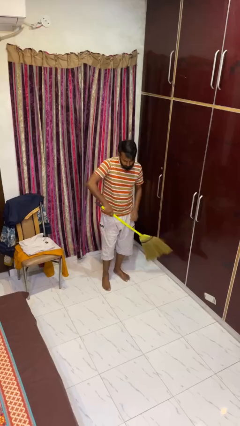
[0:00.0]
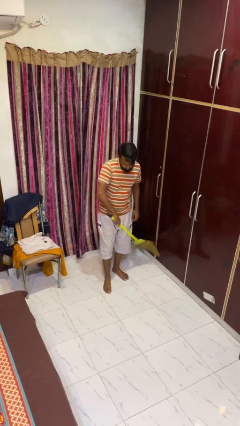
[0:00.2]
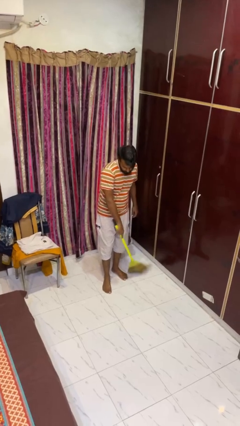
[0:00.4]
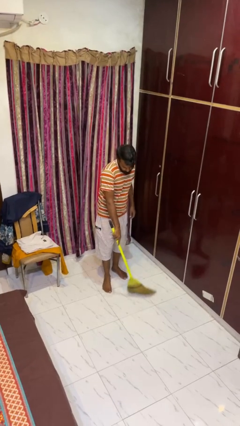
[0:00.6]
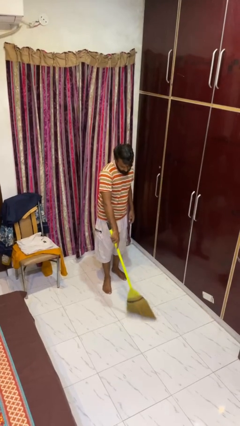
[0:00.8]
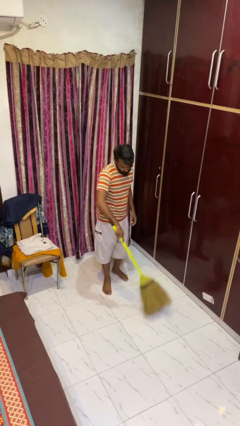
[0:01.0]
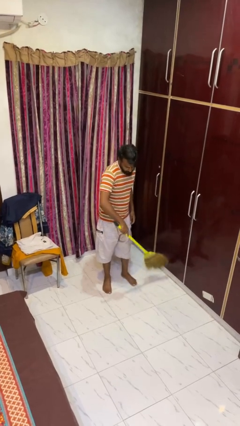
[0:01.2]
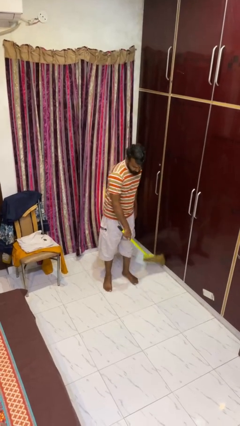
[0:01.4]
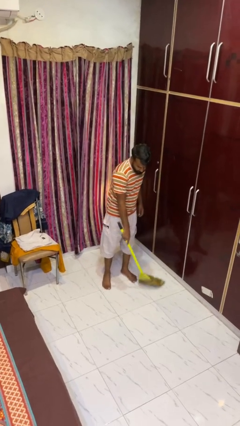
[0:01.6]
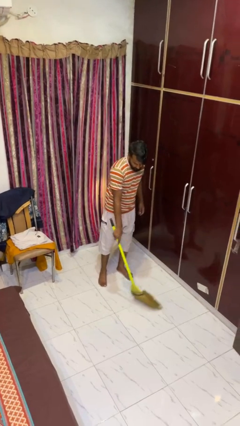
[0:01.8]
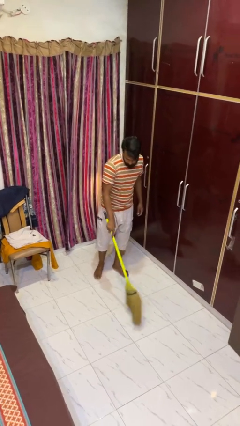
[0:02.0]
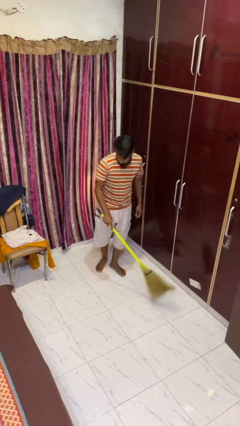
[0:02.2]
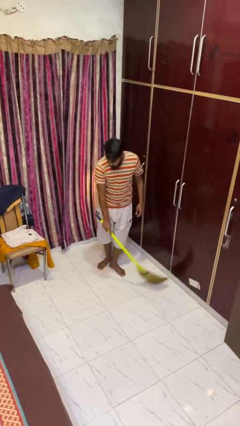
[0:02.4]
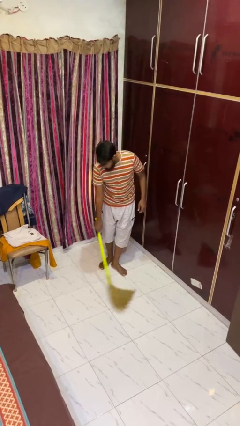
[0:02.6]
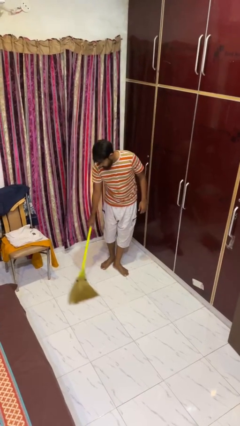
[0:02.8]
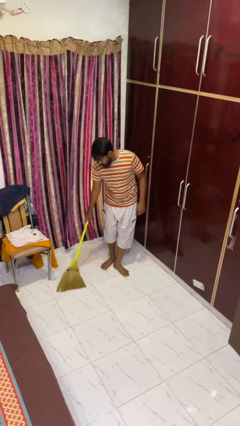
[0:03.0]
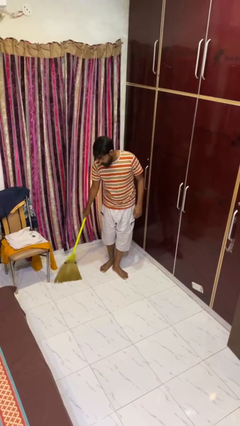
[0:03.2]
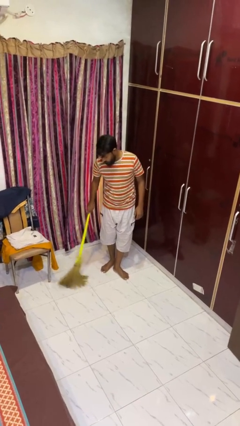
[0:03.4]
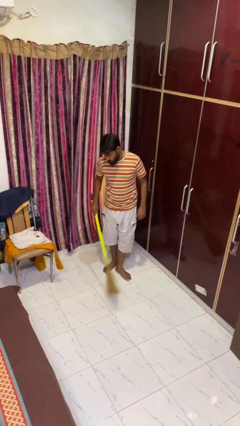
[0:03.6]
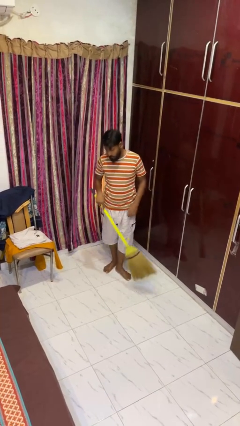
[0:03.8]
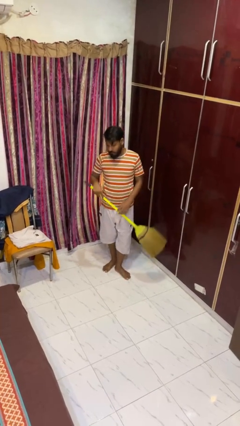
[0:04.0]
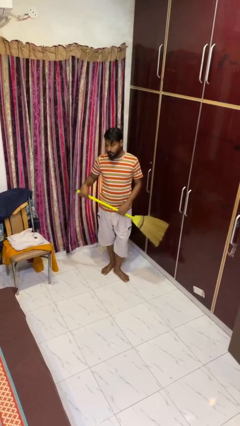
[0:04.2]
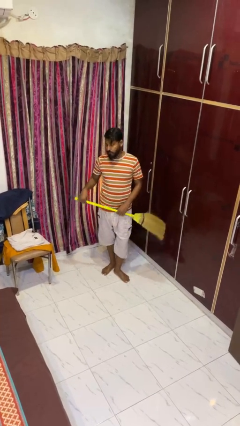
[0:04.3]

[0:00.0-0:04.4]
person sweeps floor

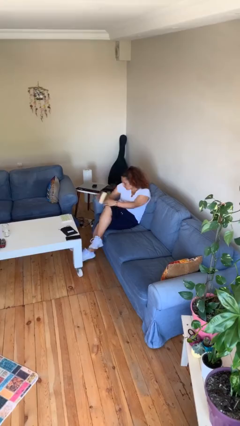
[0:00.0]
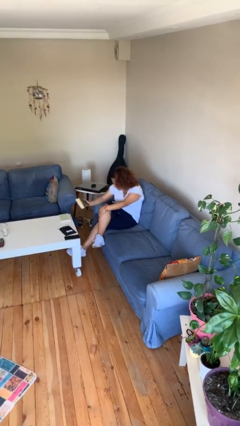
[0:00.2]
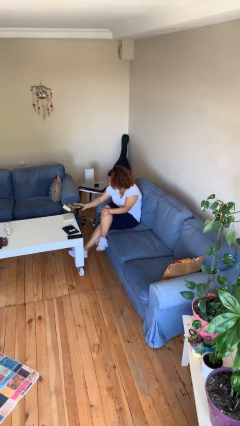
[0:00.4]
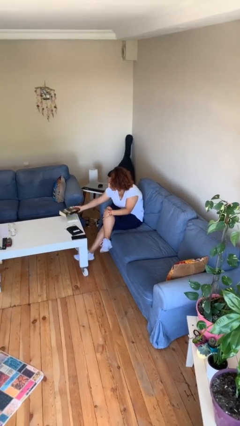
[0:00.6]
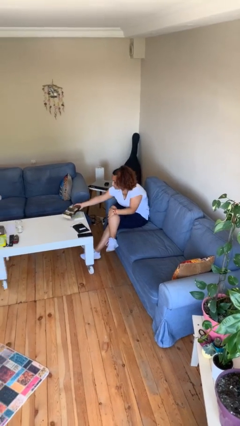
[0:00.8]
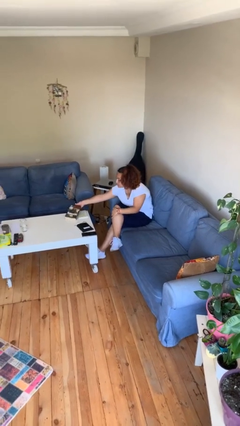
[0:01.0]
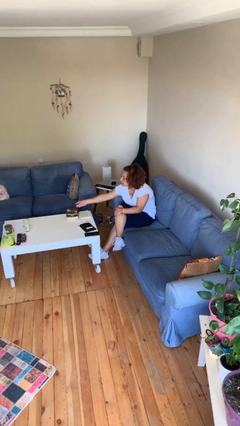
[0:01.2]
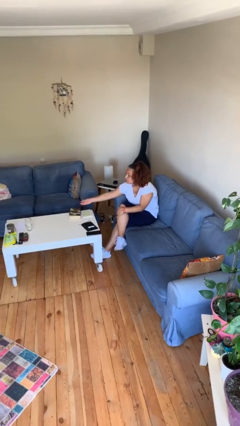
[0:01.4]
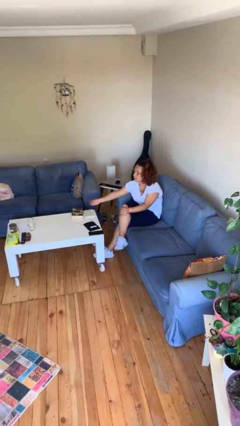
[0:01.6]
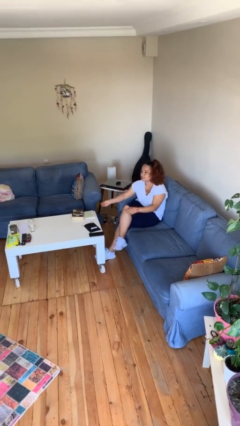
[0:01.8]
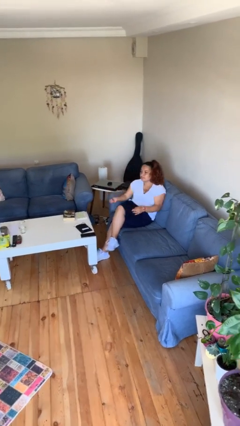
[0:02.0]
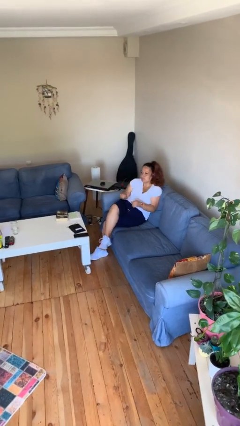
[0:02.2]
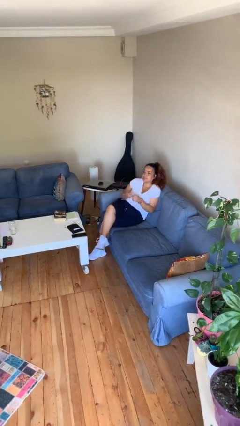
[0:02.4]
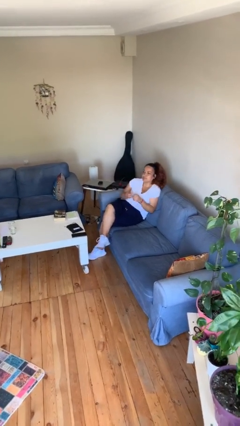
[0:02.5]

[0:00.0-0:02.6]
person puts down object on table

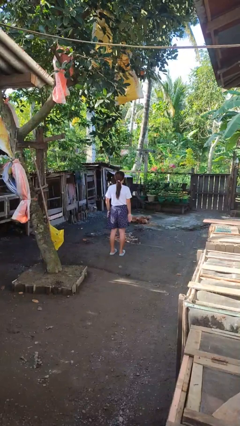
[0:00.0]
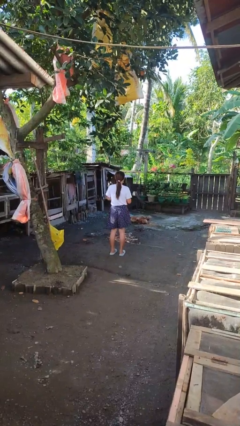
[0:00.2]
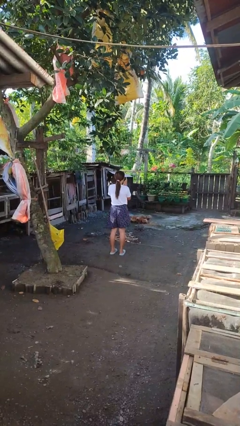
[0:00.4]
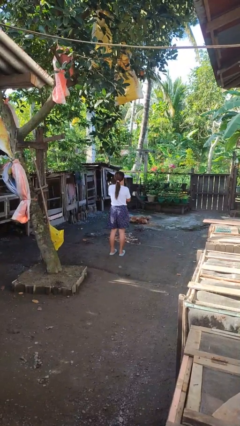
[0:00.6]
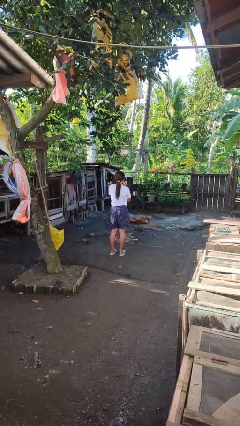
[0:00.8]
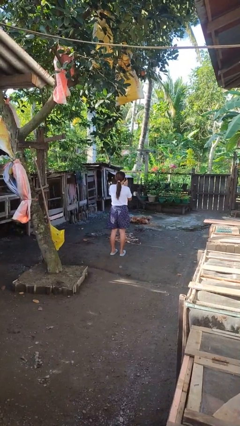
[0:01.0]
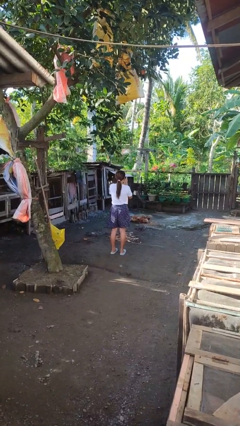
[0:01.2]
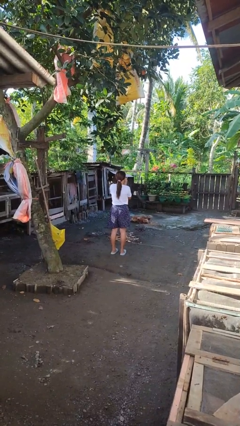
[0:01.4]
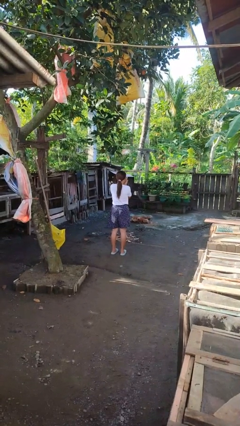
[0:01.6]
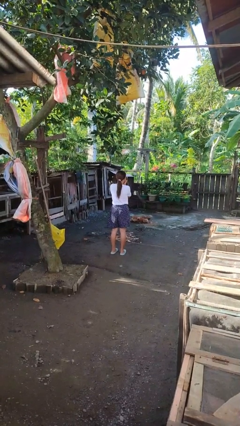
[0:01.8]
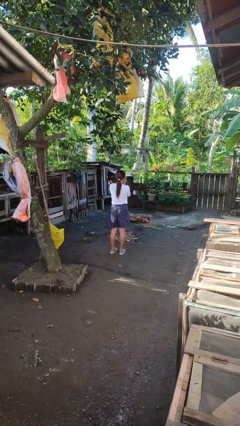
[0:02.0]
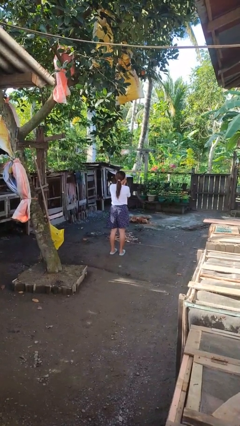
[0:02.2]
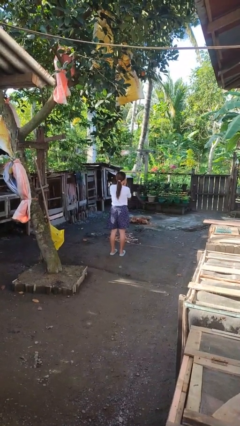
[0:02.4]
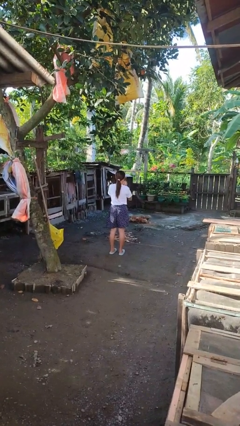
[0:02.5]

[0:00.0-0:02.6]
person blows into hands

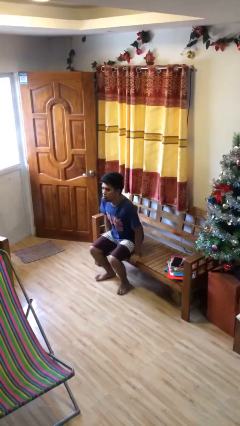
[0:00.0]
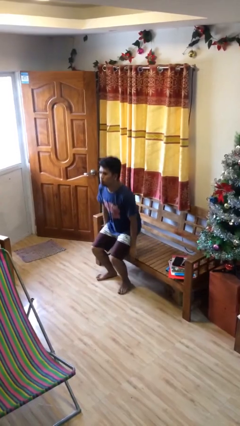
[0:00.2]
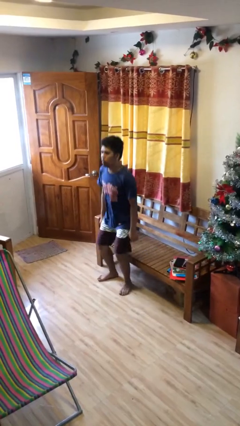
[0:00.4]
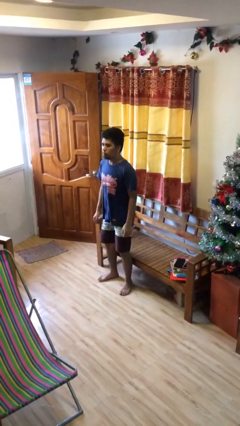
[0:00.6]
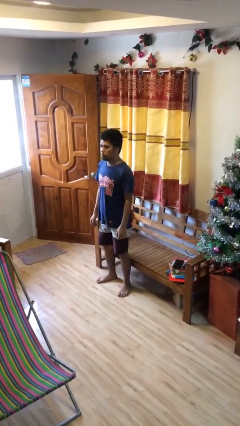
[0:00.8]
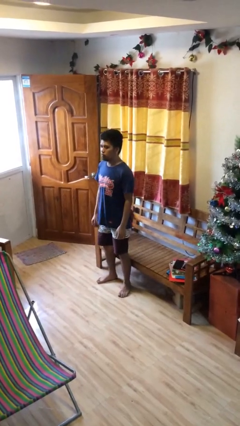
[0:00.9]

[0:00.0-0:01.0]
person stands up

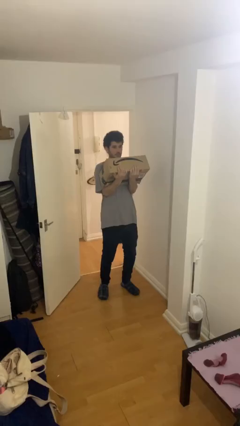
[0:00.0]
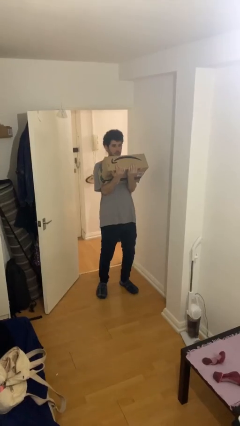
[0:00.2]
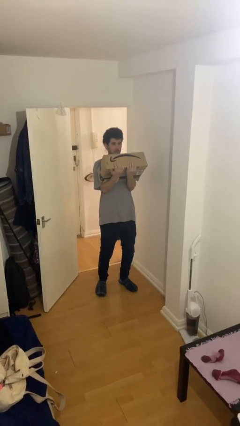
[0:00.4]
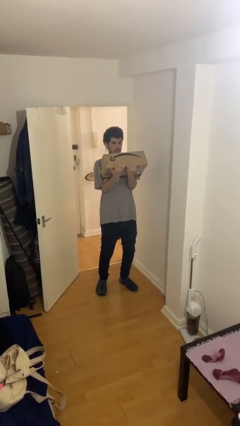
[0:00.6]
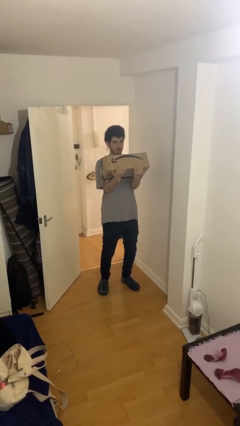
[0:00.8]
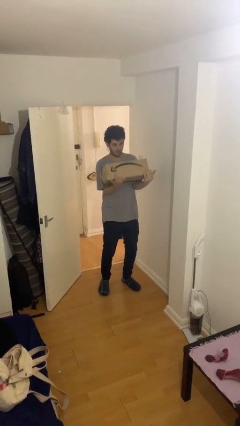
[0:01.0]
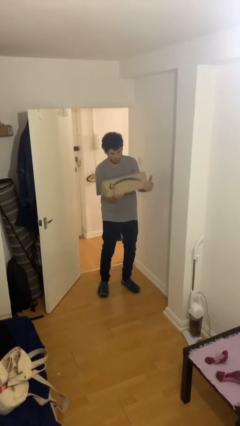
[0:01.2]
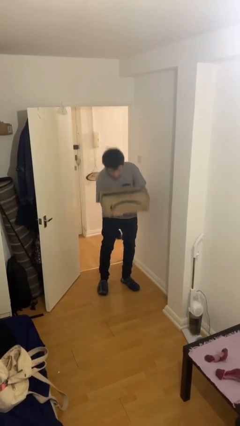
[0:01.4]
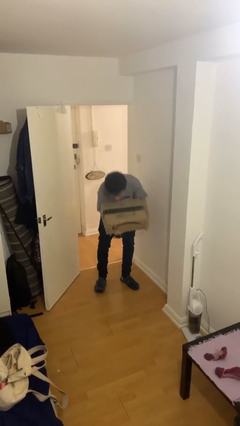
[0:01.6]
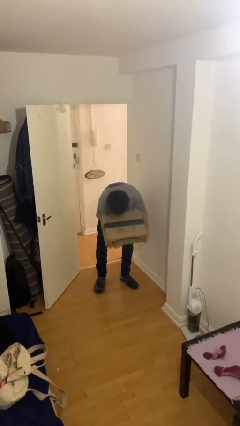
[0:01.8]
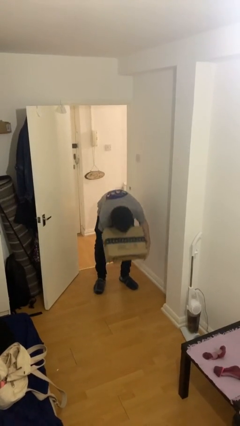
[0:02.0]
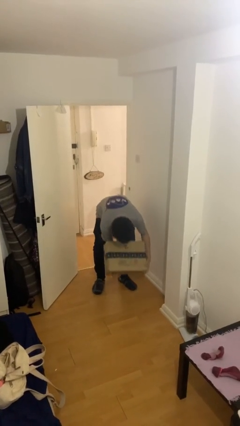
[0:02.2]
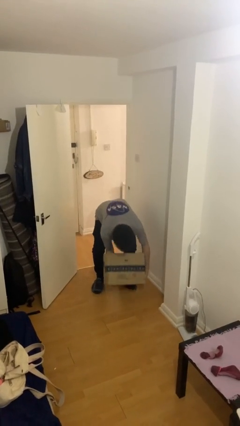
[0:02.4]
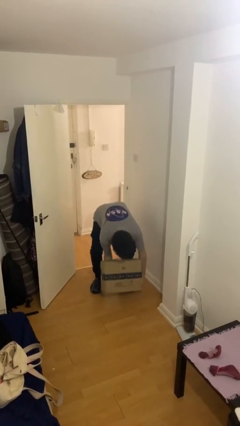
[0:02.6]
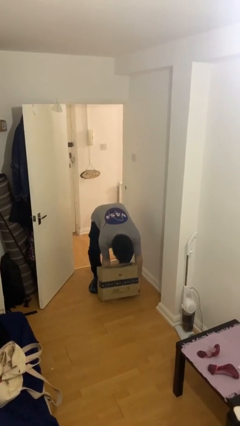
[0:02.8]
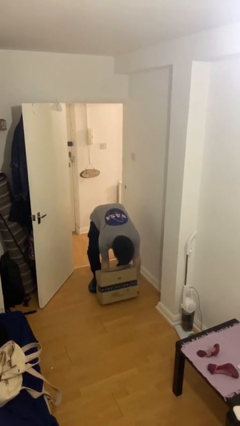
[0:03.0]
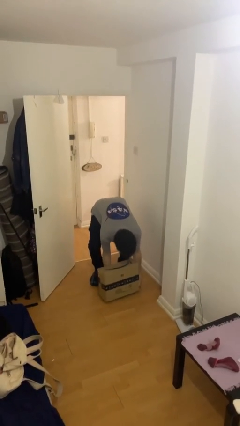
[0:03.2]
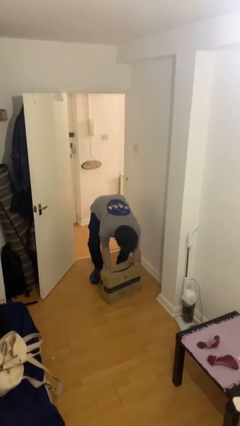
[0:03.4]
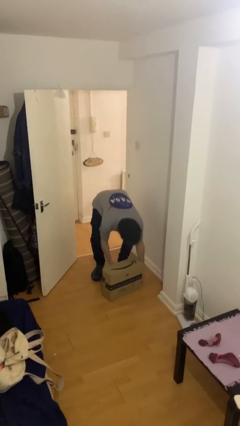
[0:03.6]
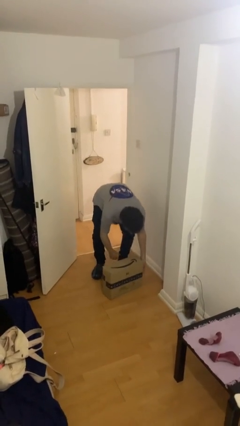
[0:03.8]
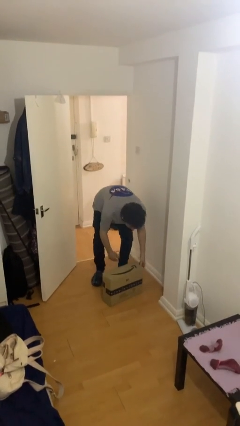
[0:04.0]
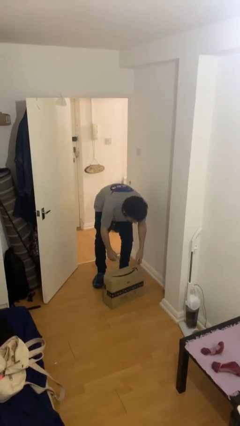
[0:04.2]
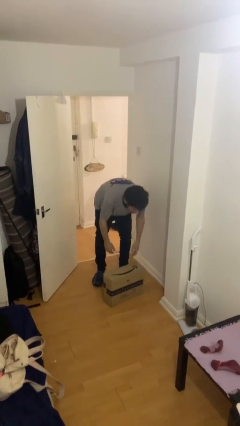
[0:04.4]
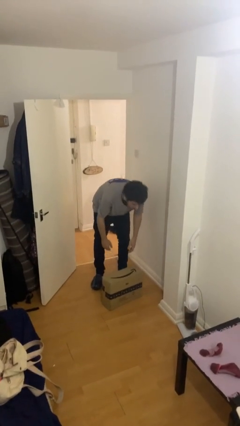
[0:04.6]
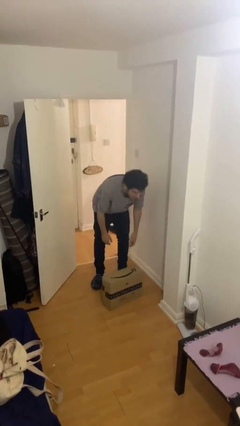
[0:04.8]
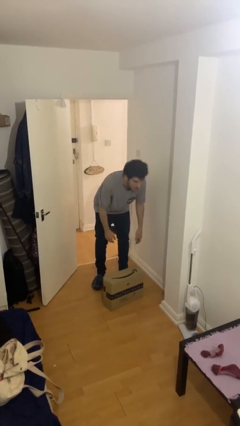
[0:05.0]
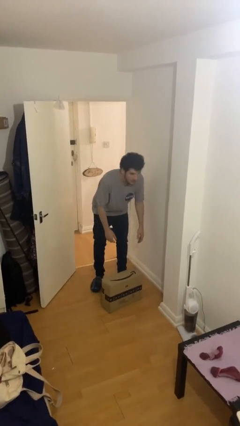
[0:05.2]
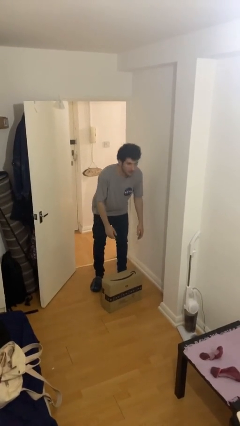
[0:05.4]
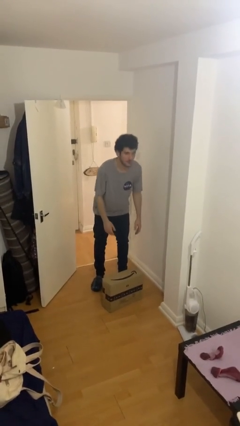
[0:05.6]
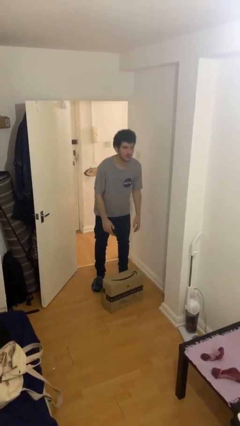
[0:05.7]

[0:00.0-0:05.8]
person puts down object on floor

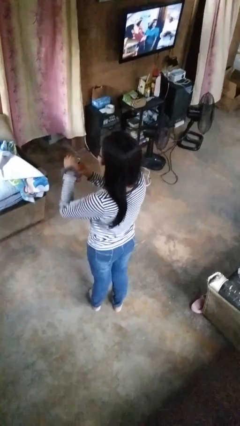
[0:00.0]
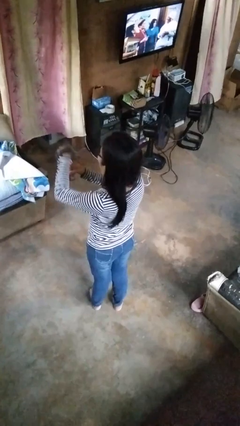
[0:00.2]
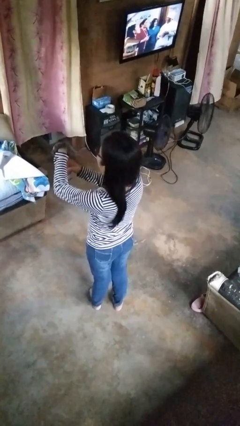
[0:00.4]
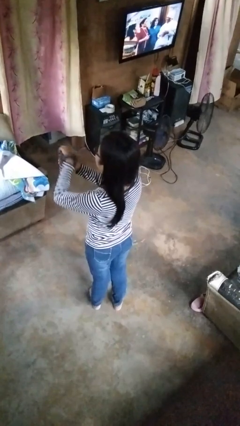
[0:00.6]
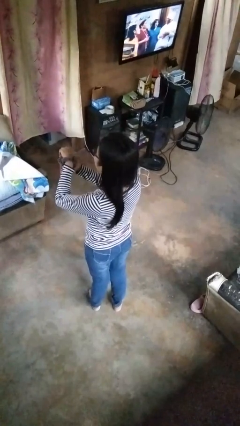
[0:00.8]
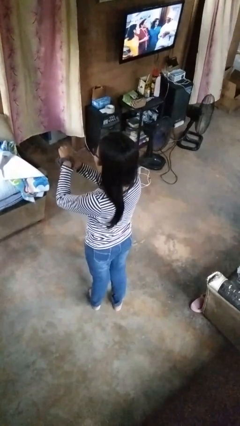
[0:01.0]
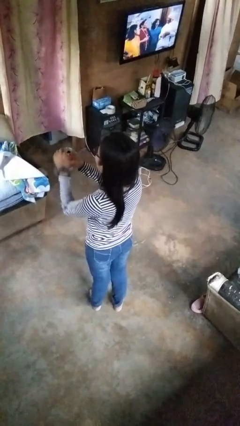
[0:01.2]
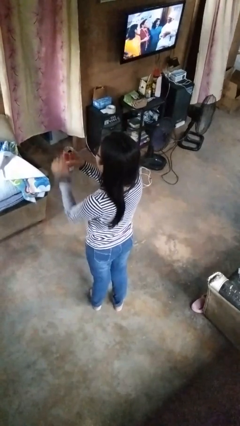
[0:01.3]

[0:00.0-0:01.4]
person opens beverage can
